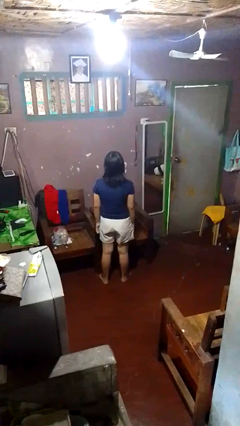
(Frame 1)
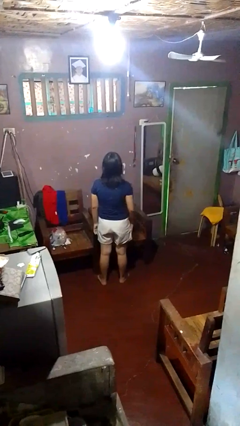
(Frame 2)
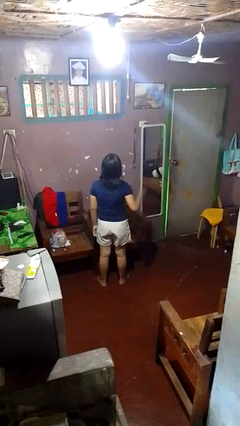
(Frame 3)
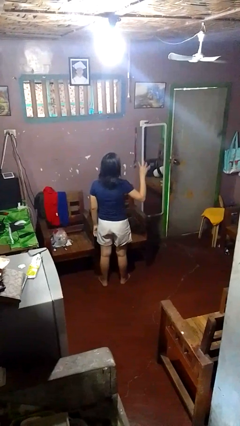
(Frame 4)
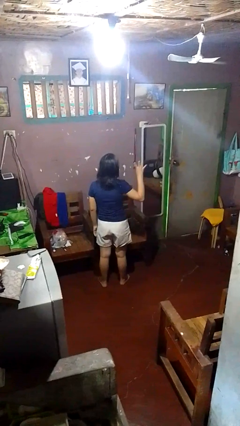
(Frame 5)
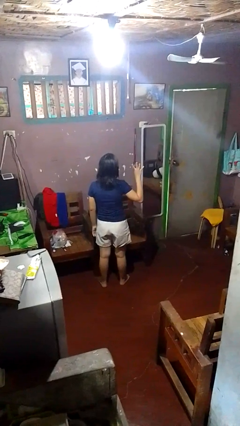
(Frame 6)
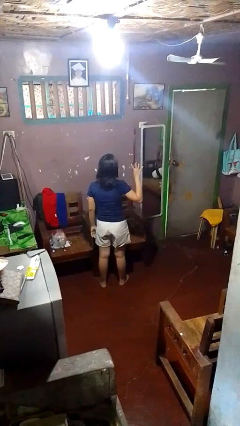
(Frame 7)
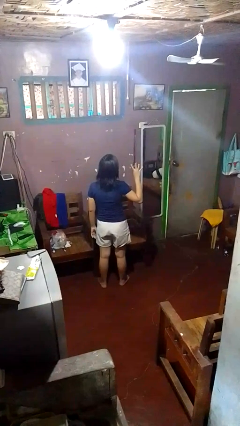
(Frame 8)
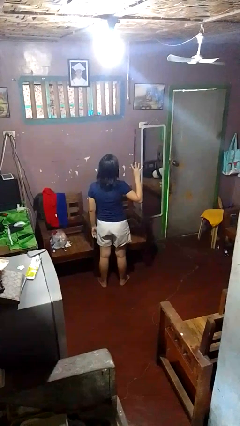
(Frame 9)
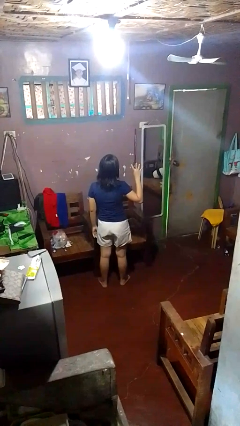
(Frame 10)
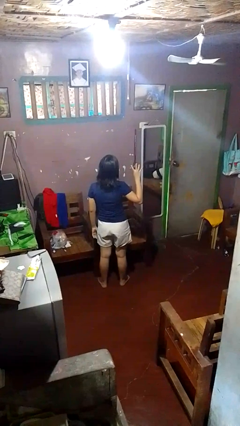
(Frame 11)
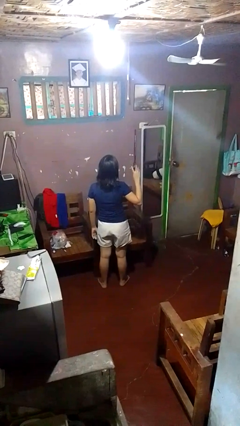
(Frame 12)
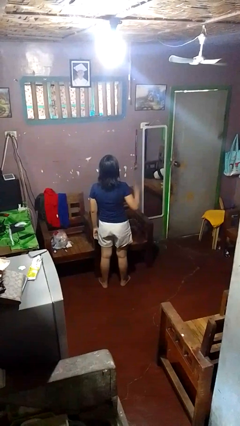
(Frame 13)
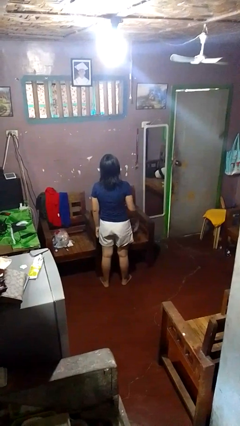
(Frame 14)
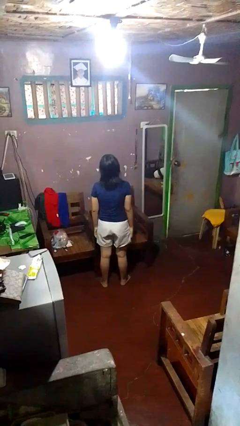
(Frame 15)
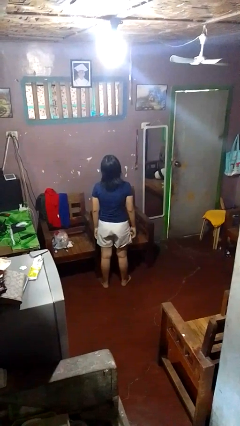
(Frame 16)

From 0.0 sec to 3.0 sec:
person gestures number four

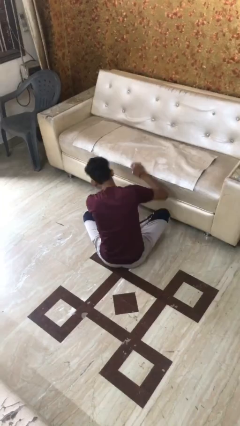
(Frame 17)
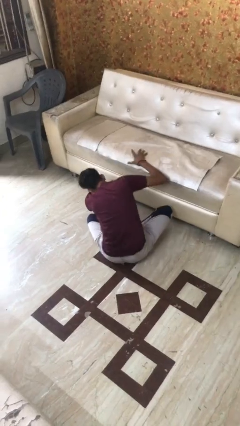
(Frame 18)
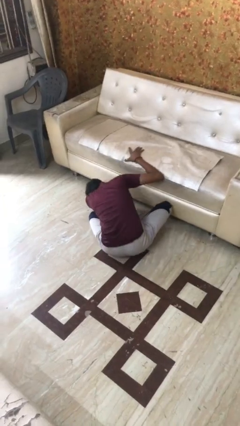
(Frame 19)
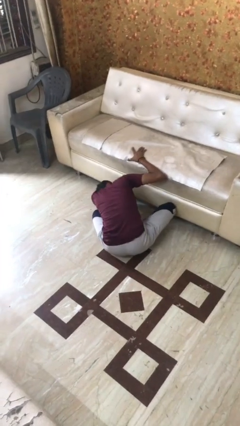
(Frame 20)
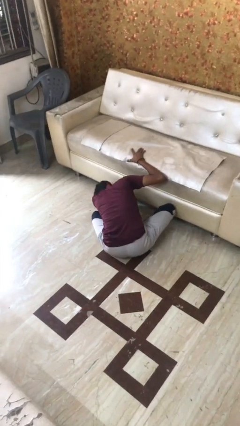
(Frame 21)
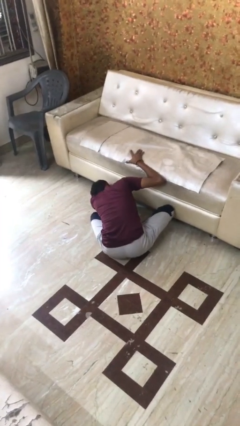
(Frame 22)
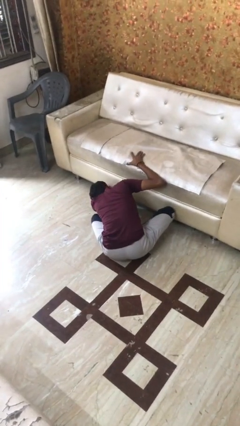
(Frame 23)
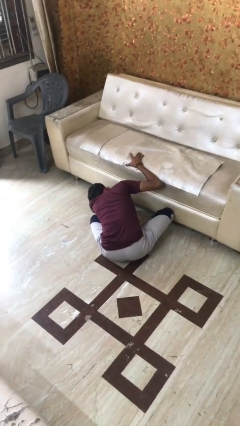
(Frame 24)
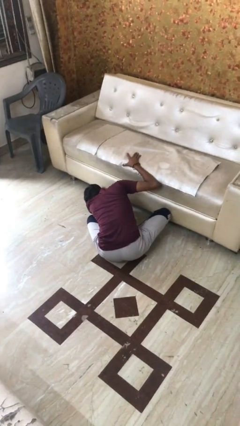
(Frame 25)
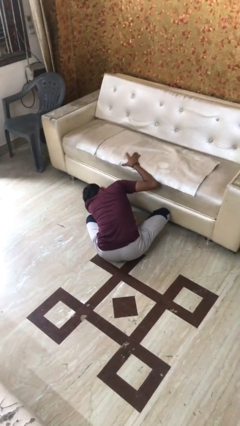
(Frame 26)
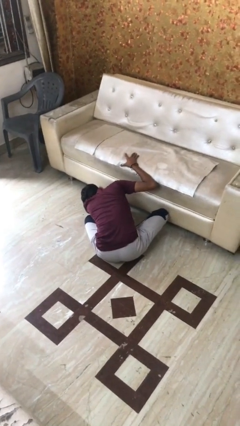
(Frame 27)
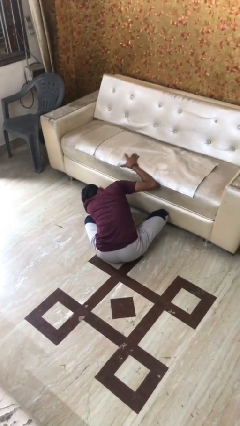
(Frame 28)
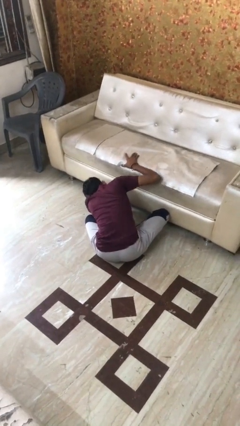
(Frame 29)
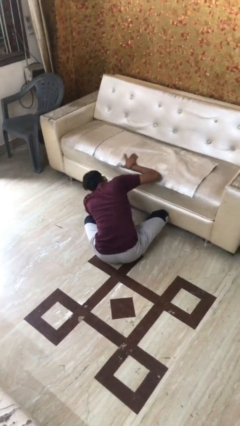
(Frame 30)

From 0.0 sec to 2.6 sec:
person searches under bed

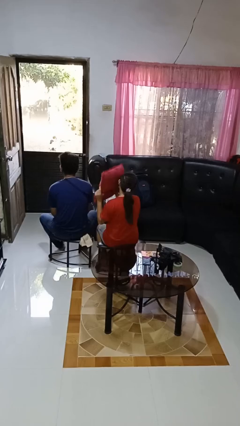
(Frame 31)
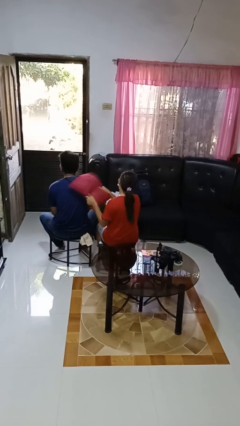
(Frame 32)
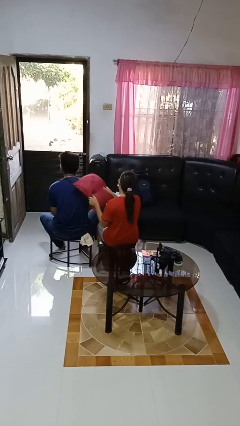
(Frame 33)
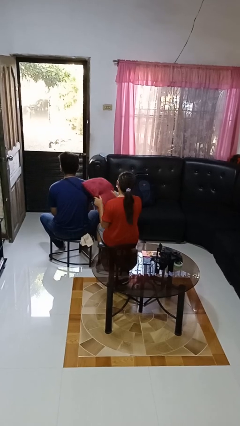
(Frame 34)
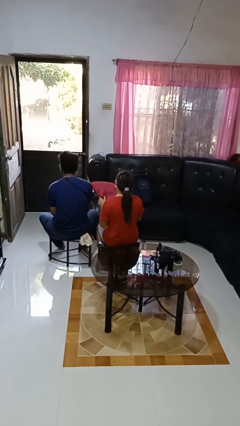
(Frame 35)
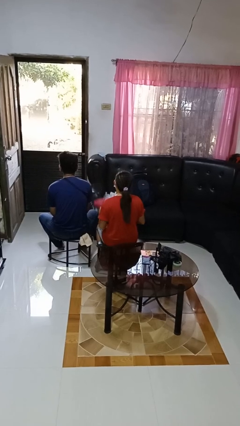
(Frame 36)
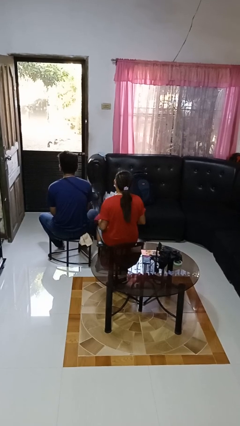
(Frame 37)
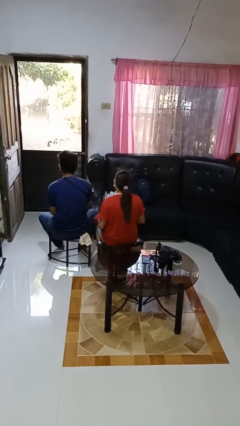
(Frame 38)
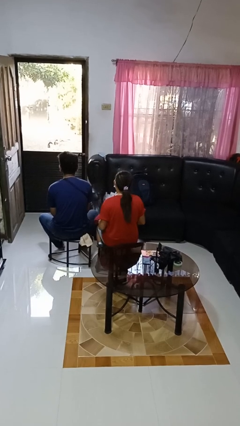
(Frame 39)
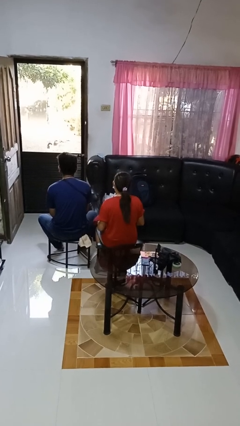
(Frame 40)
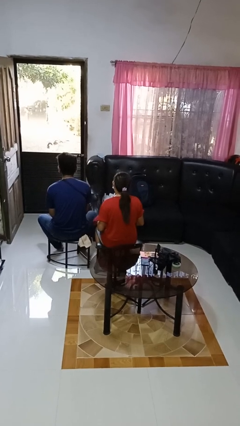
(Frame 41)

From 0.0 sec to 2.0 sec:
person hits person with pillow

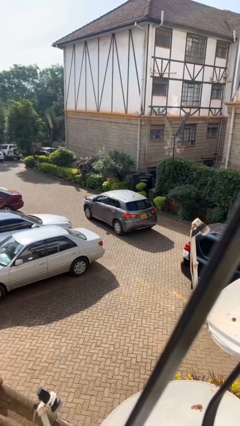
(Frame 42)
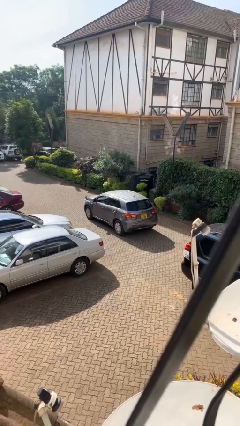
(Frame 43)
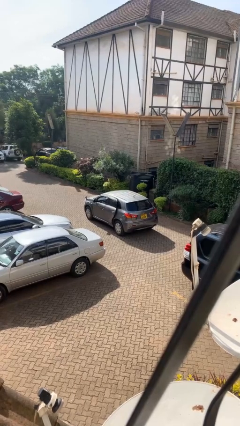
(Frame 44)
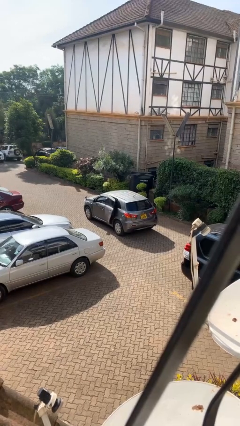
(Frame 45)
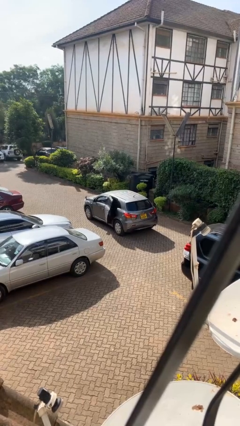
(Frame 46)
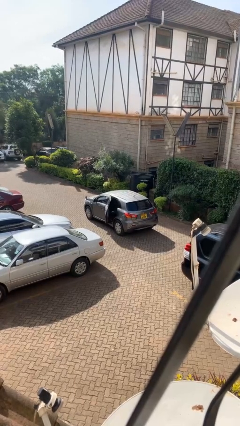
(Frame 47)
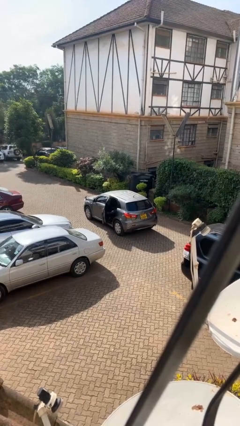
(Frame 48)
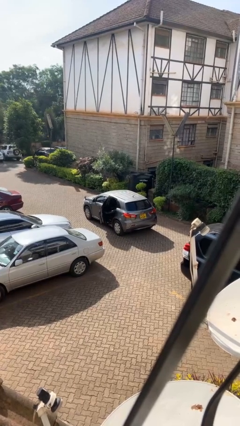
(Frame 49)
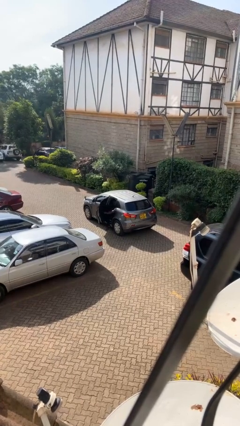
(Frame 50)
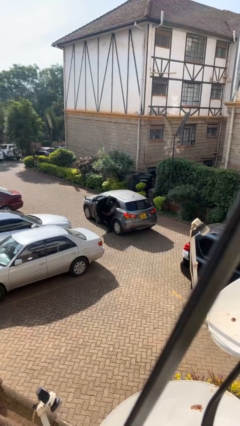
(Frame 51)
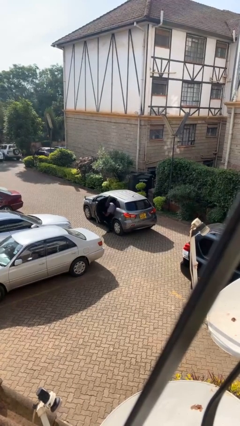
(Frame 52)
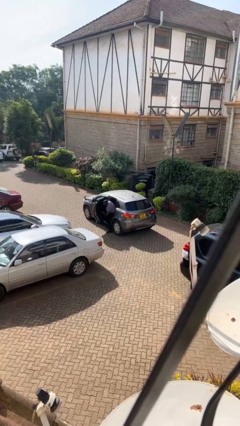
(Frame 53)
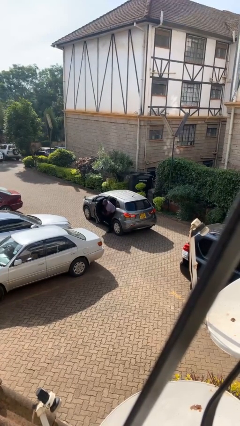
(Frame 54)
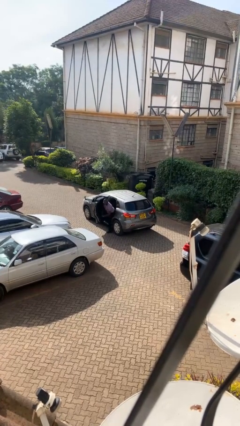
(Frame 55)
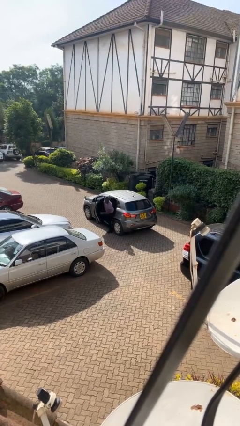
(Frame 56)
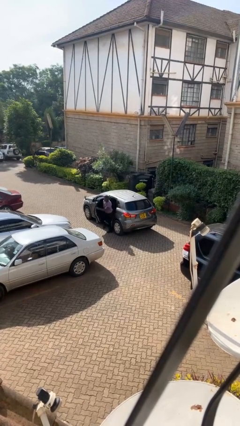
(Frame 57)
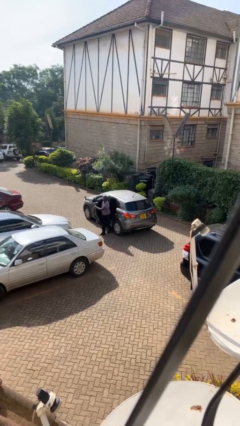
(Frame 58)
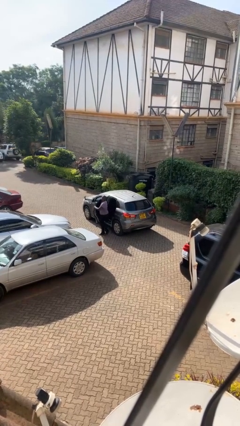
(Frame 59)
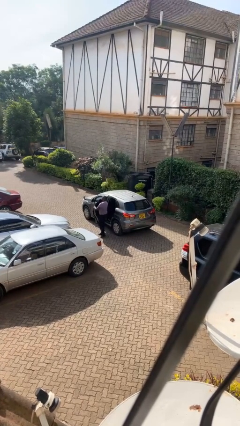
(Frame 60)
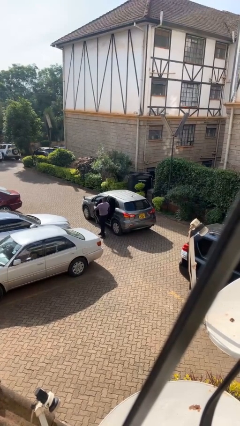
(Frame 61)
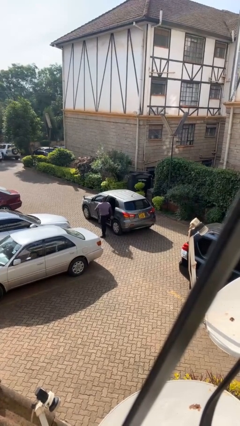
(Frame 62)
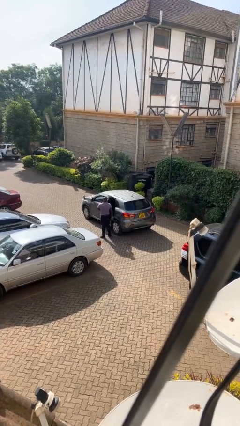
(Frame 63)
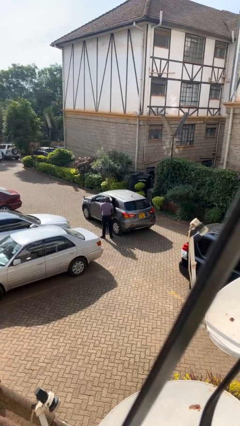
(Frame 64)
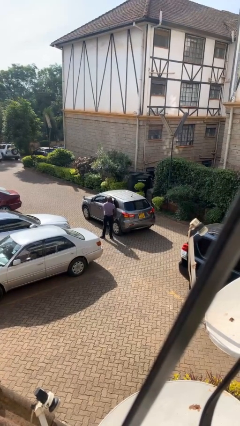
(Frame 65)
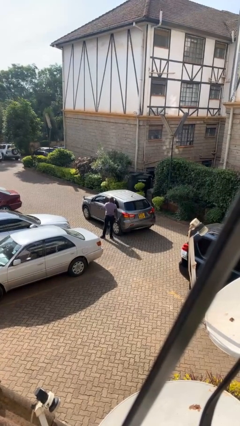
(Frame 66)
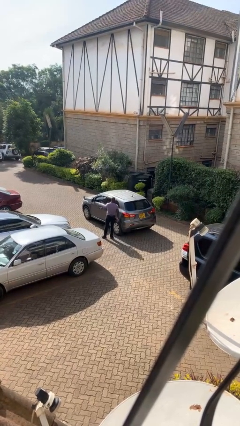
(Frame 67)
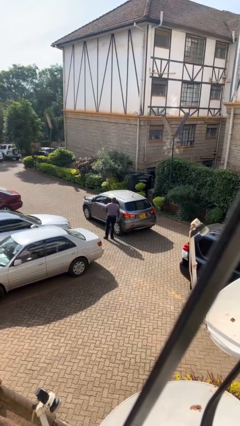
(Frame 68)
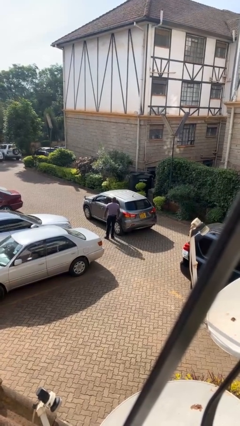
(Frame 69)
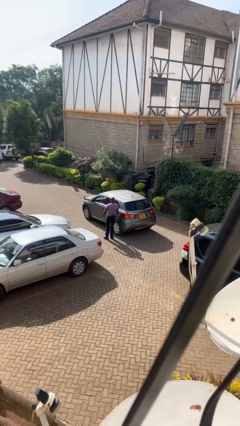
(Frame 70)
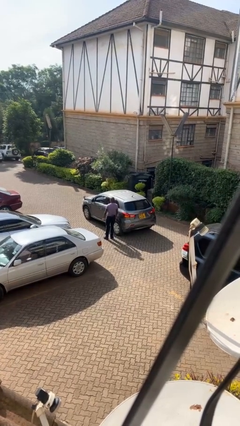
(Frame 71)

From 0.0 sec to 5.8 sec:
car drops off person

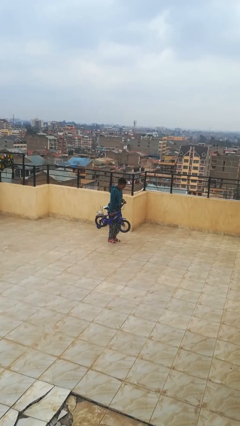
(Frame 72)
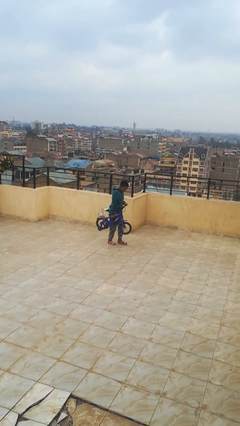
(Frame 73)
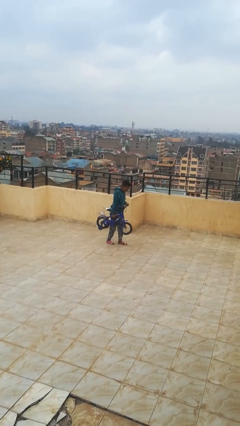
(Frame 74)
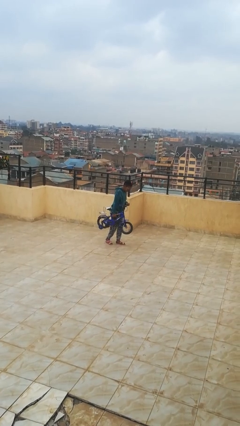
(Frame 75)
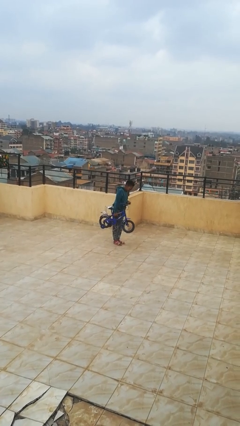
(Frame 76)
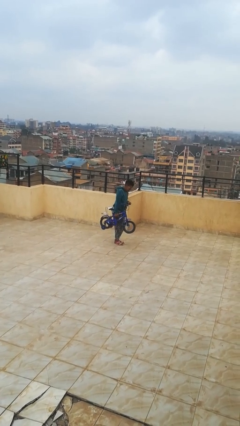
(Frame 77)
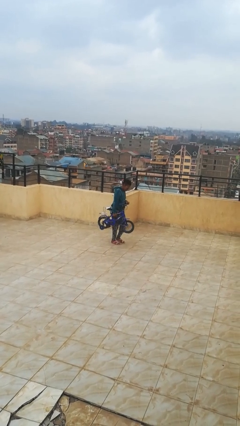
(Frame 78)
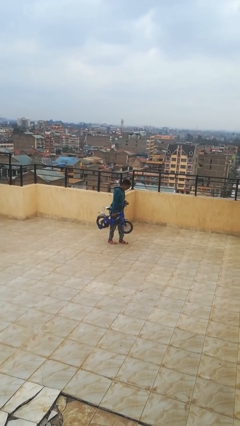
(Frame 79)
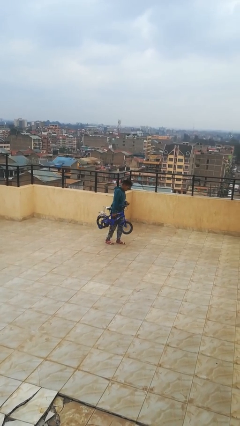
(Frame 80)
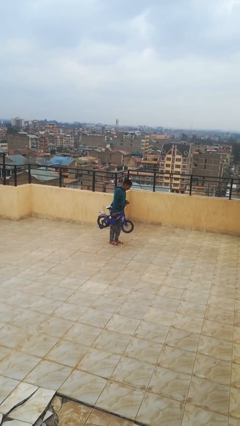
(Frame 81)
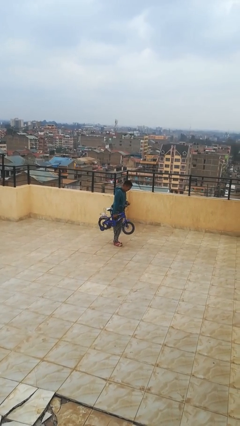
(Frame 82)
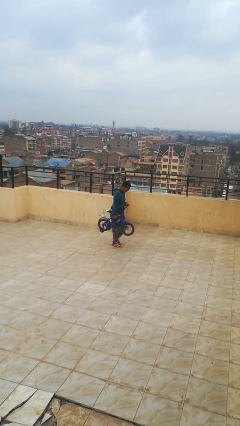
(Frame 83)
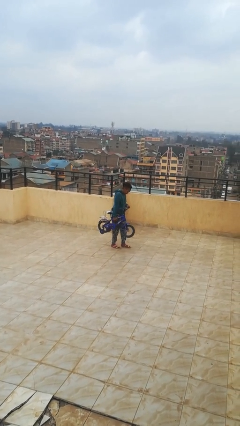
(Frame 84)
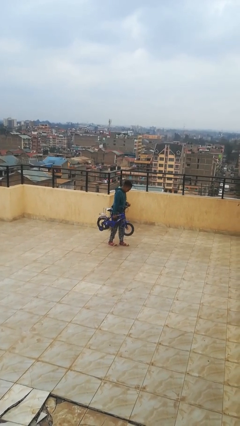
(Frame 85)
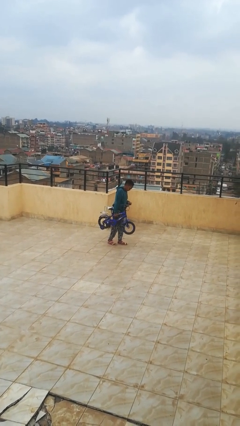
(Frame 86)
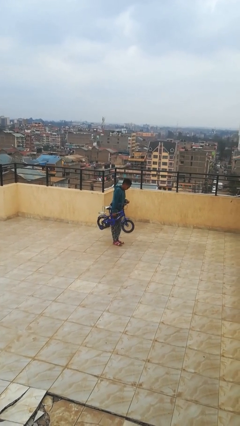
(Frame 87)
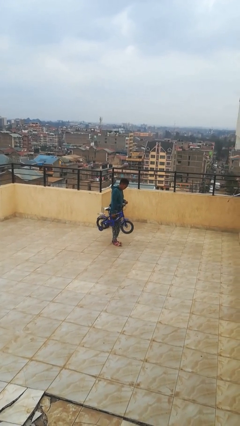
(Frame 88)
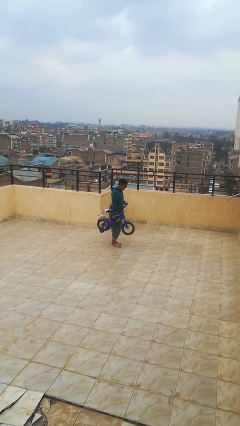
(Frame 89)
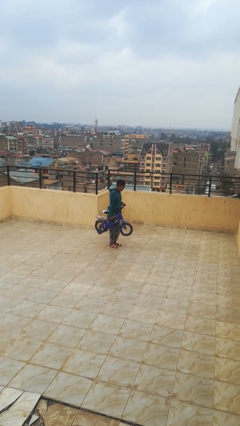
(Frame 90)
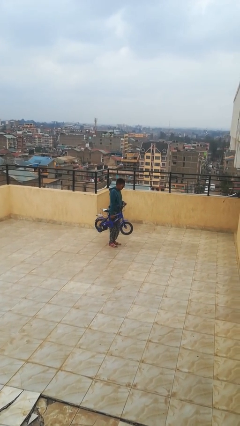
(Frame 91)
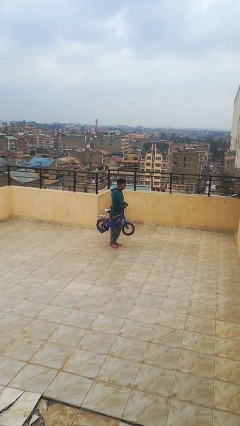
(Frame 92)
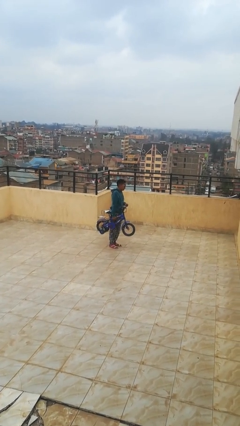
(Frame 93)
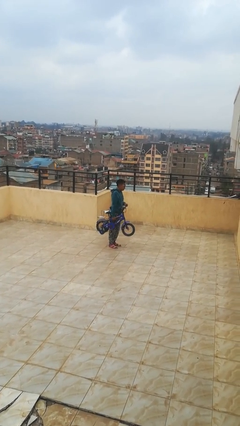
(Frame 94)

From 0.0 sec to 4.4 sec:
person carries bicycle

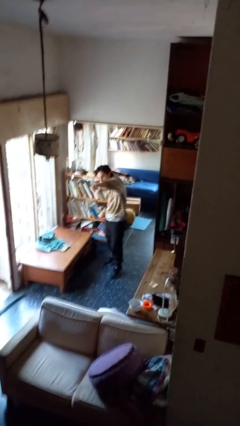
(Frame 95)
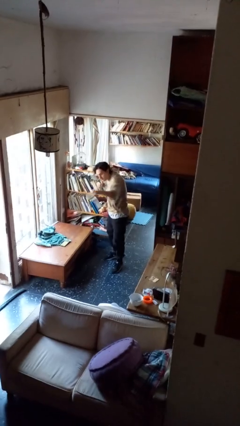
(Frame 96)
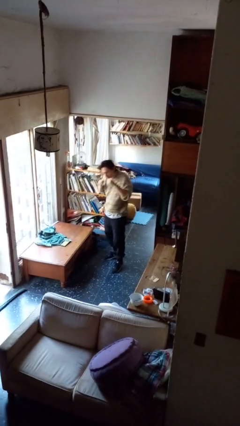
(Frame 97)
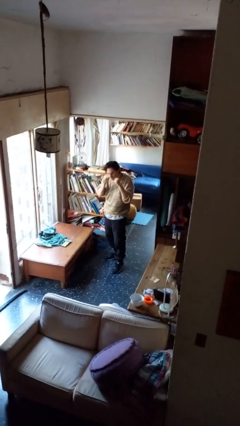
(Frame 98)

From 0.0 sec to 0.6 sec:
person punches
